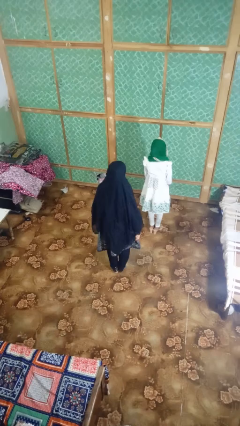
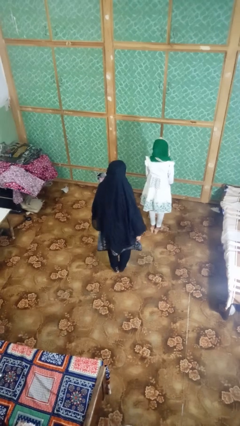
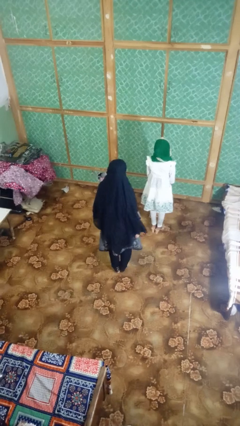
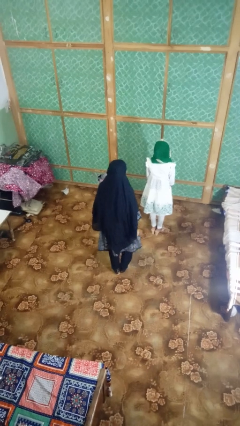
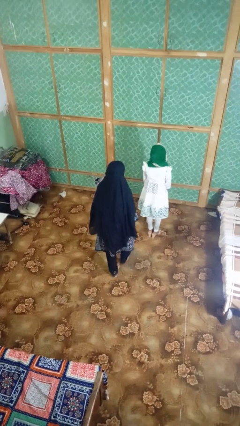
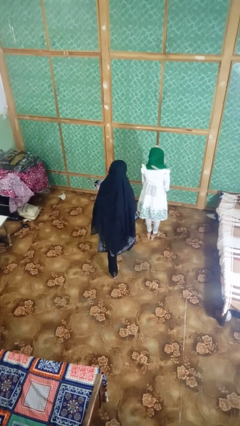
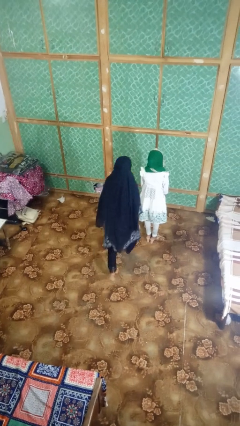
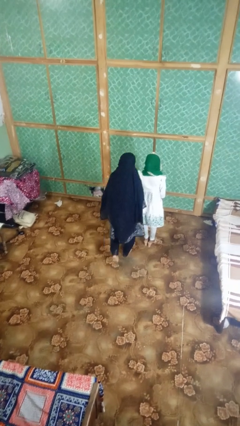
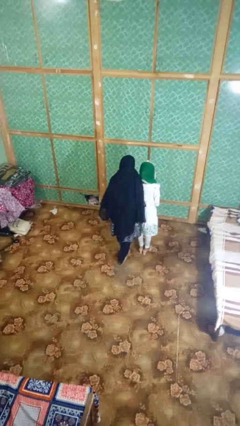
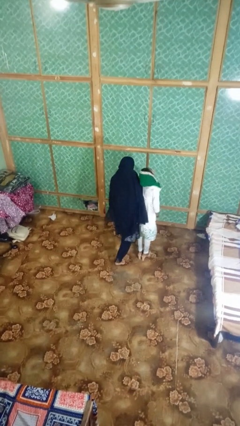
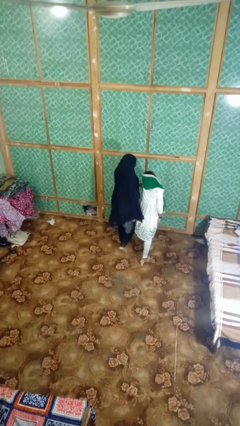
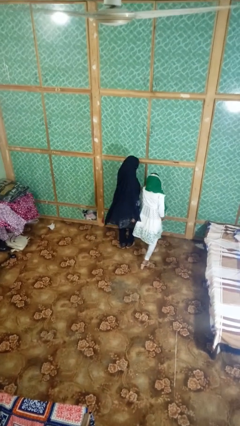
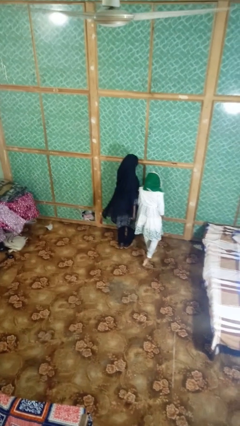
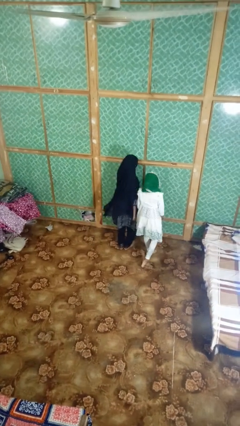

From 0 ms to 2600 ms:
person bumps into person

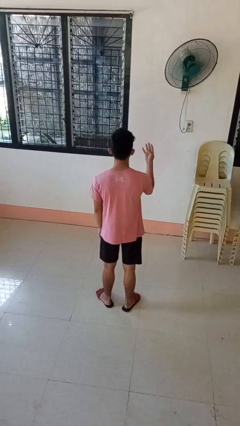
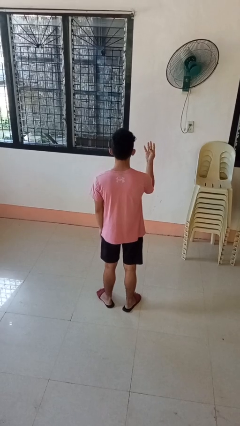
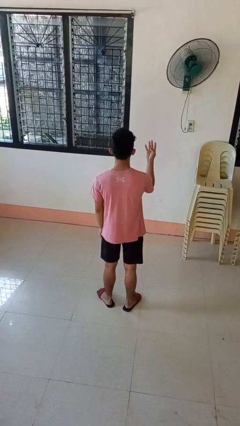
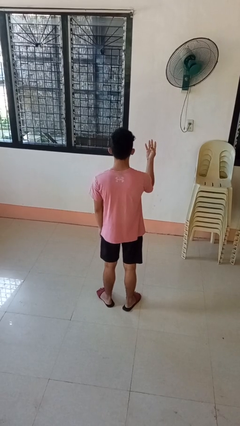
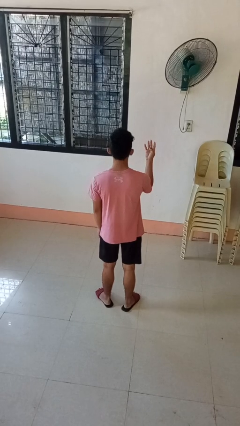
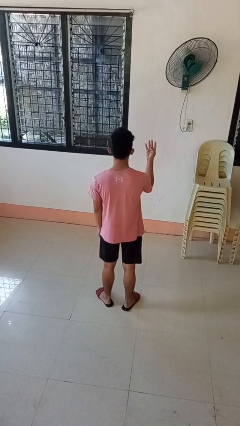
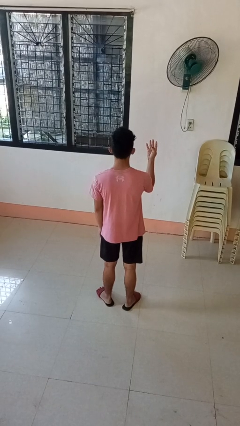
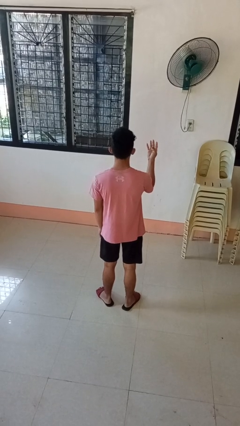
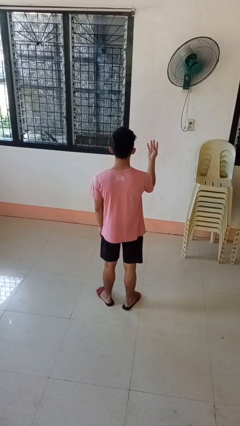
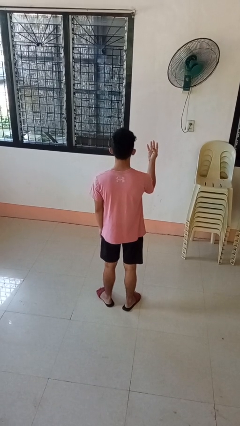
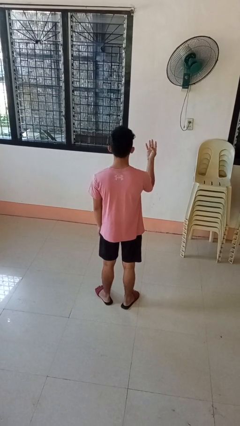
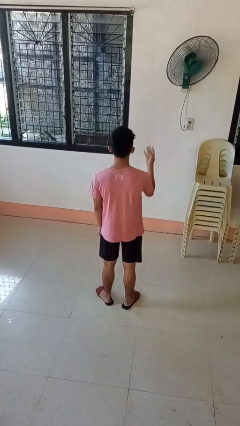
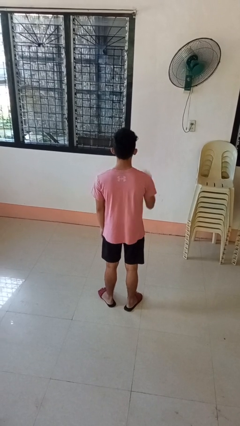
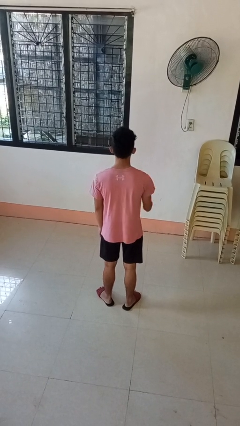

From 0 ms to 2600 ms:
person gestures number four

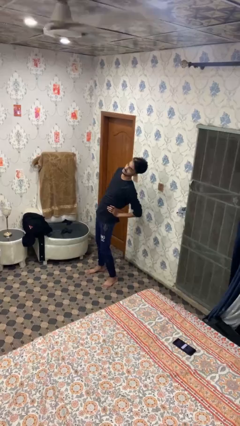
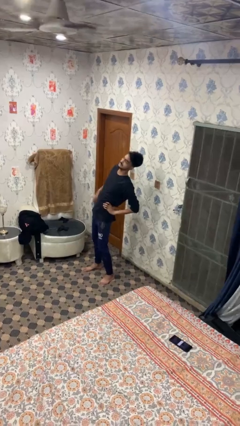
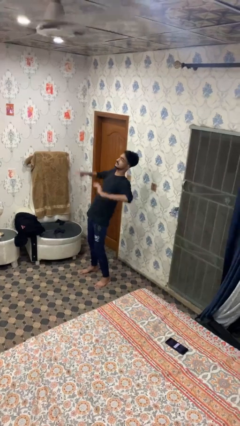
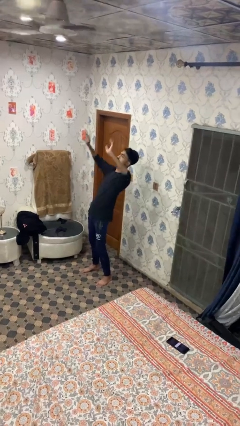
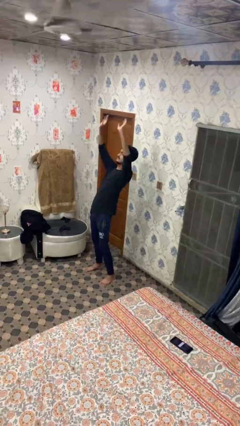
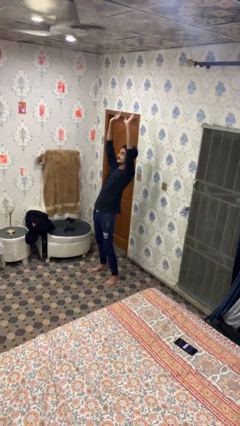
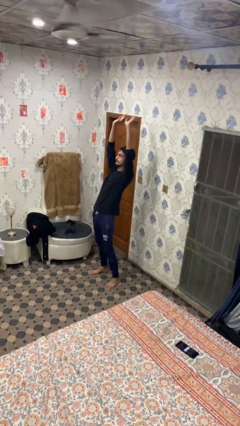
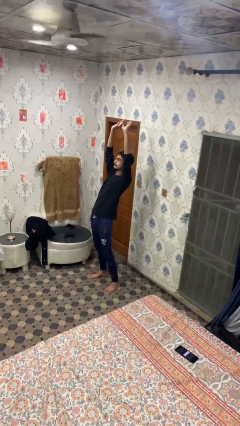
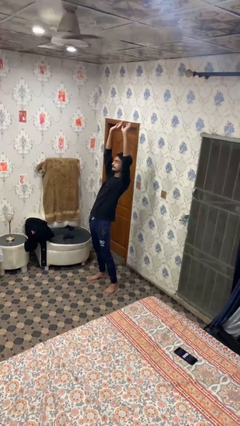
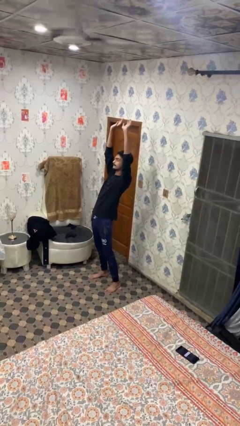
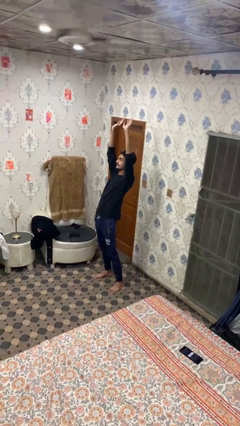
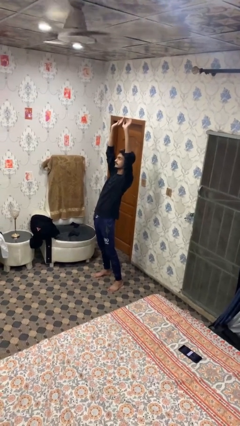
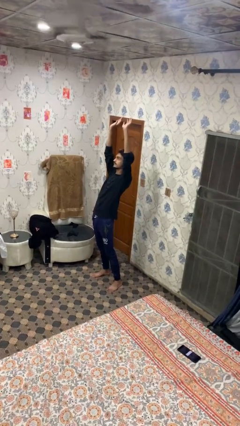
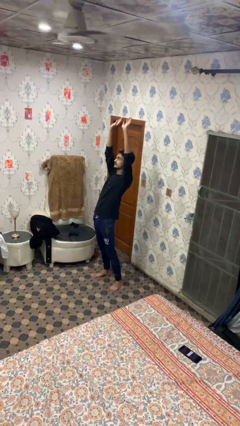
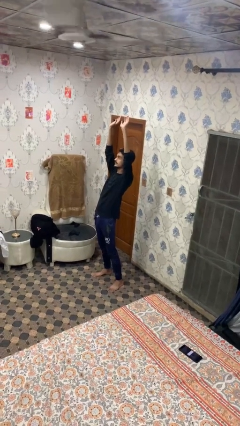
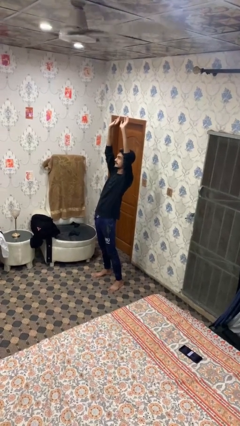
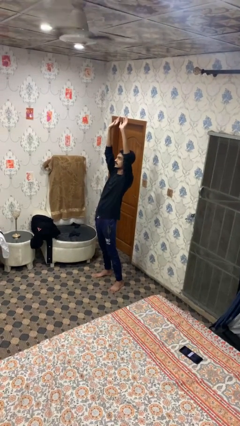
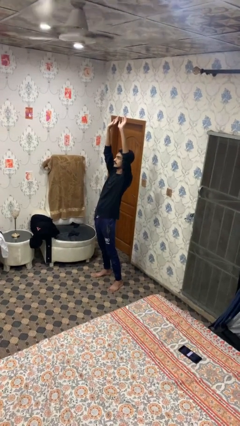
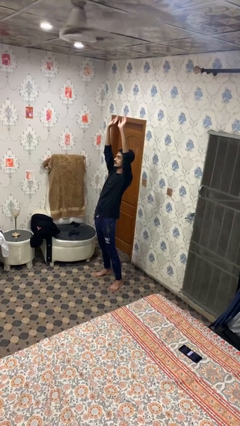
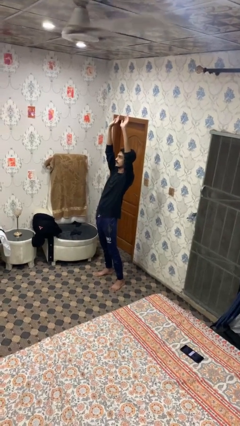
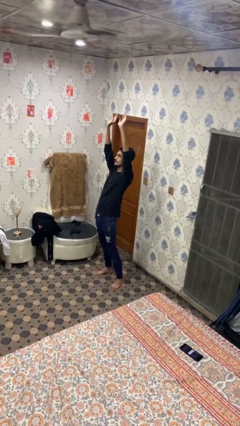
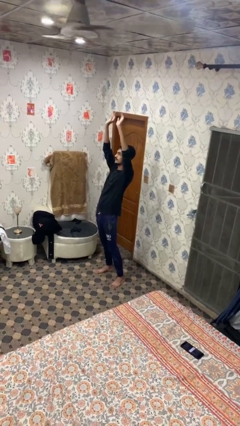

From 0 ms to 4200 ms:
person stretches arms over head

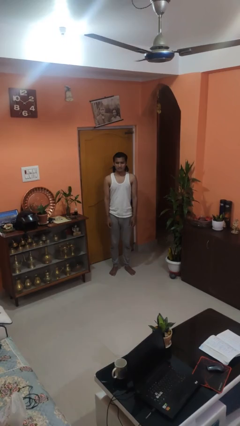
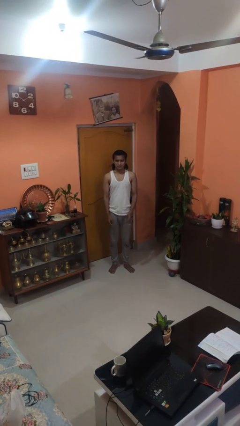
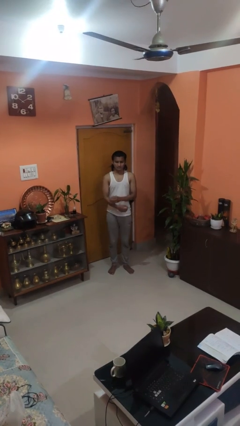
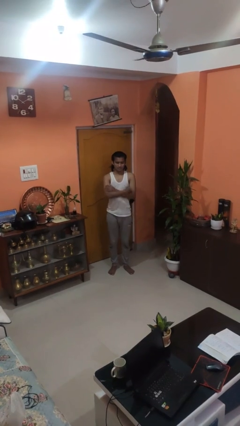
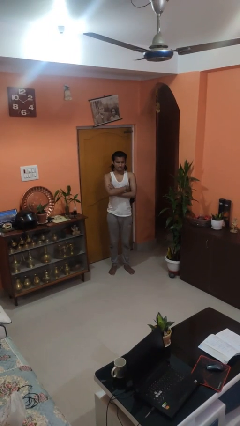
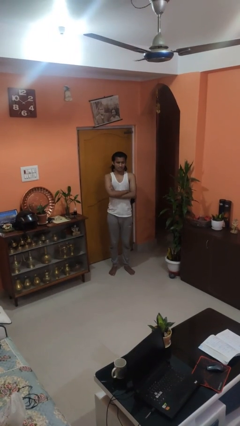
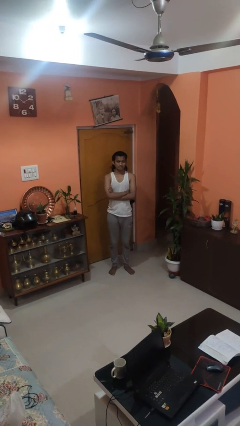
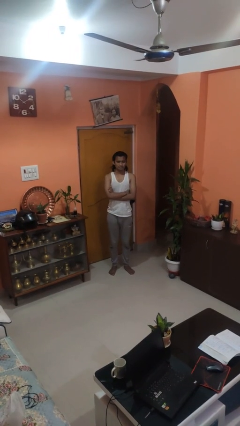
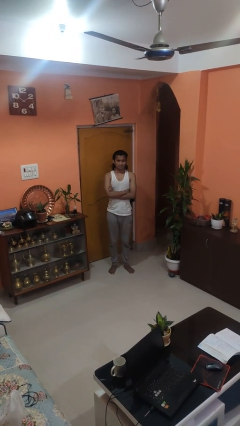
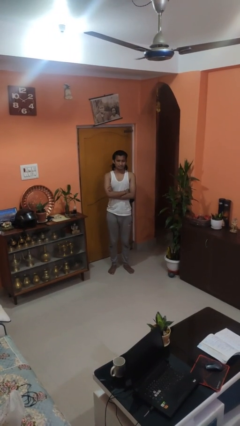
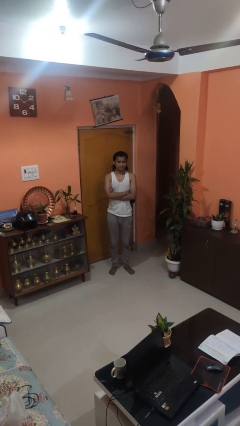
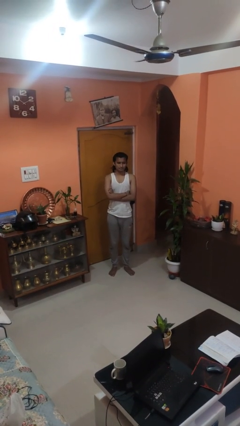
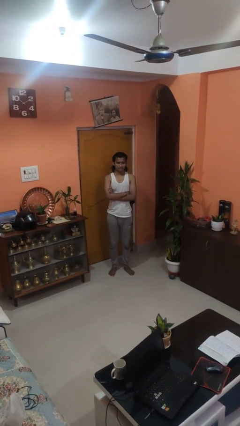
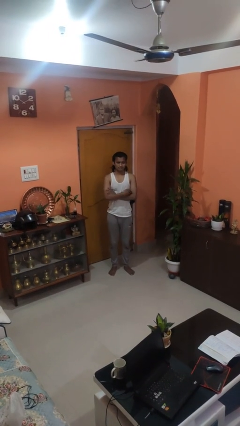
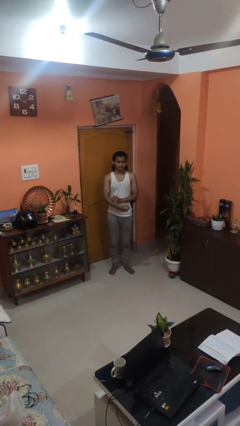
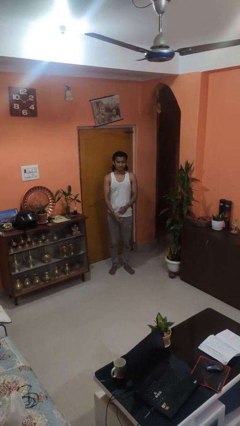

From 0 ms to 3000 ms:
person crosses arms

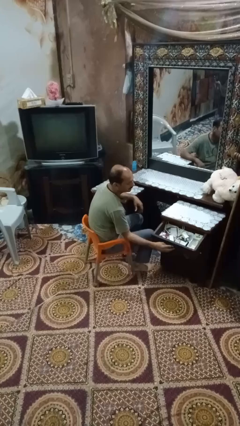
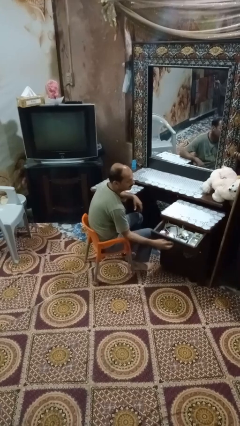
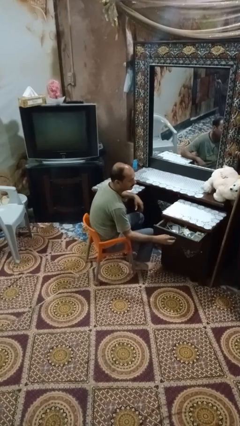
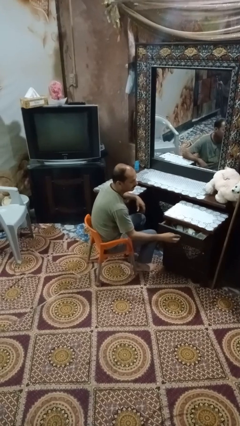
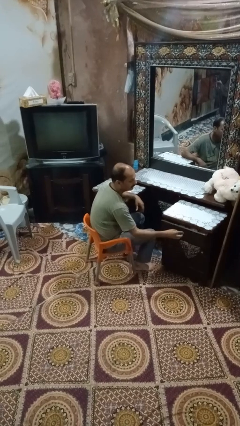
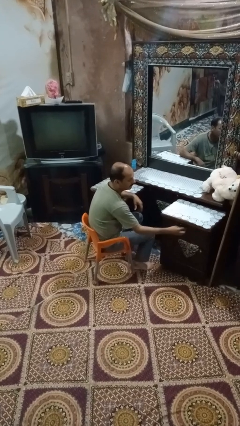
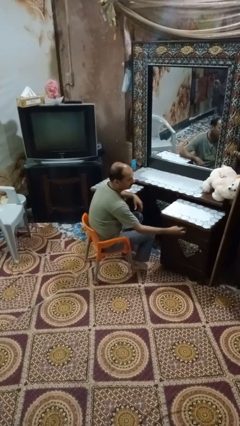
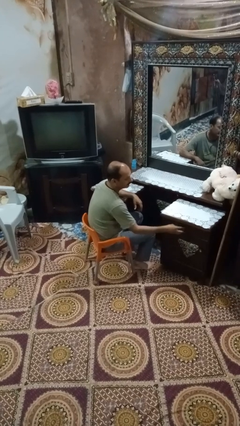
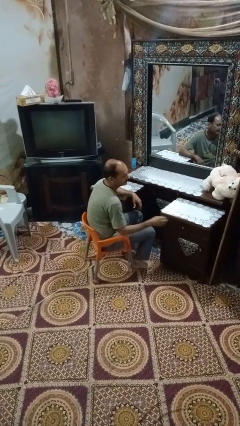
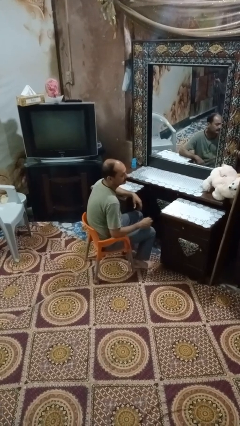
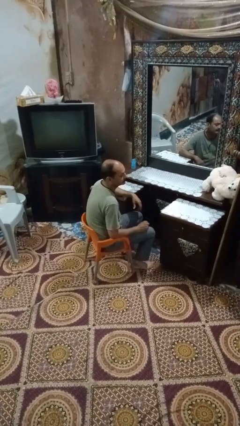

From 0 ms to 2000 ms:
person closes dresser drawer

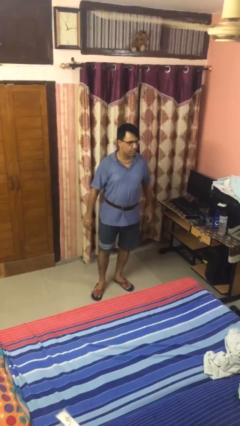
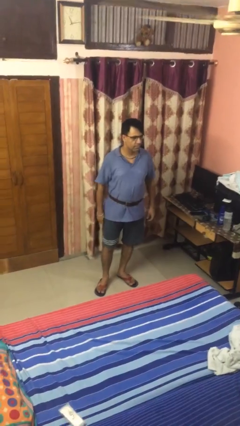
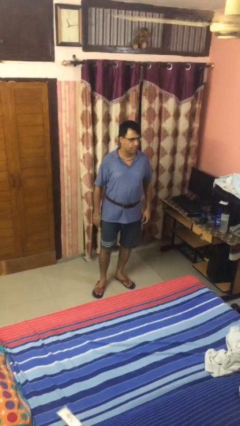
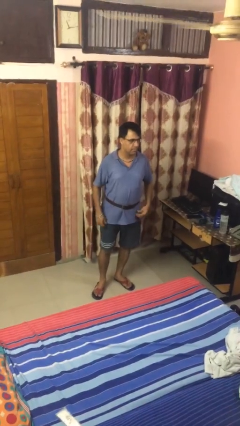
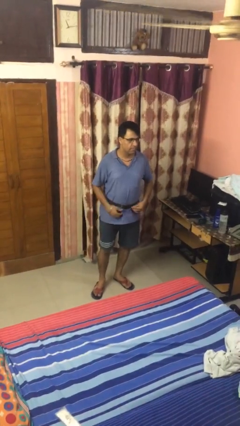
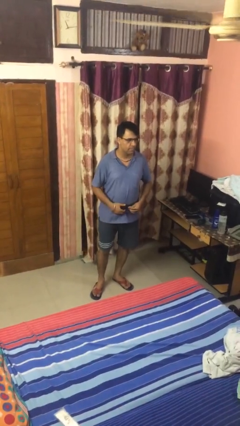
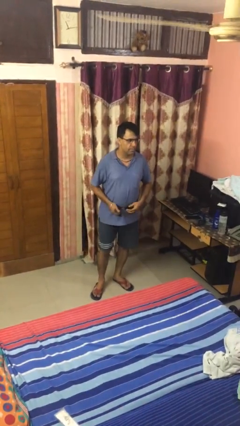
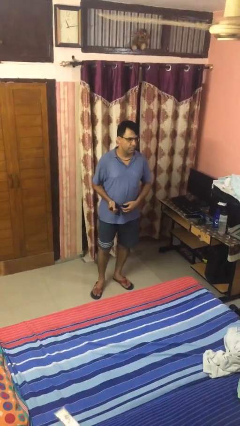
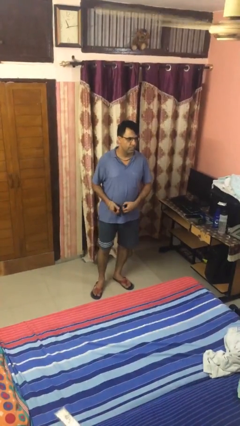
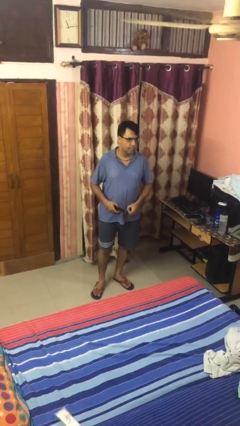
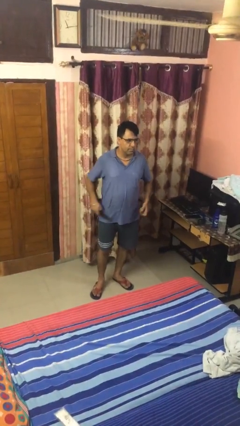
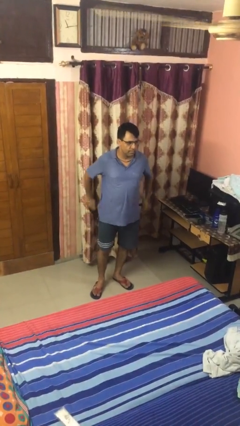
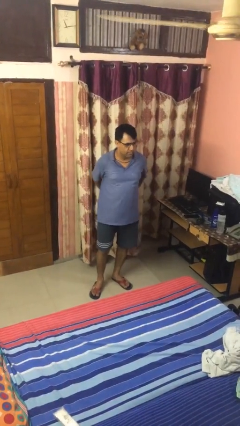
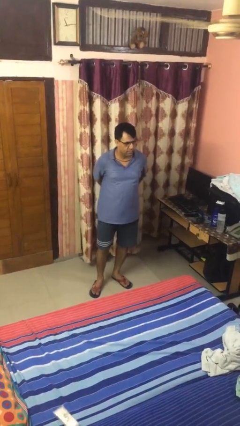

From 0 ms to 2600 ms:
person takes off belt

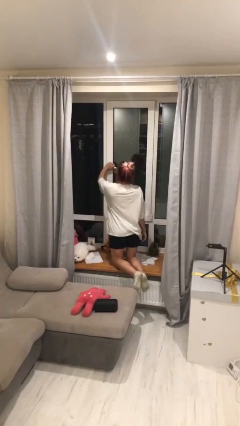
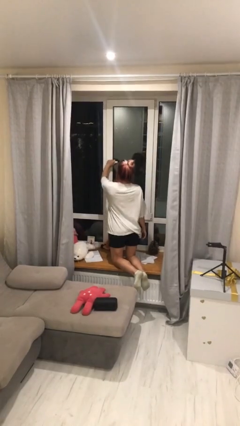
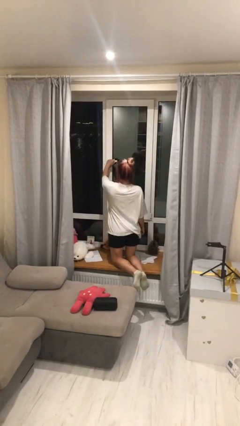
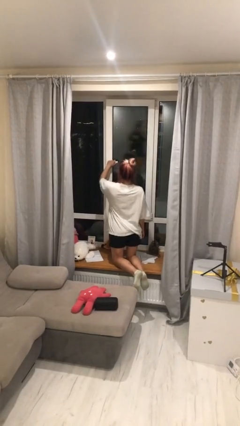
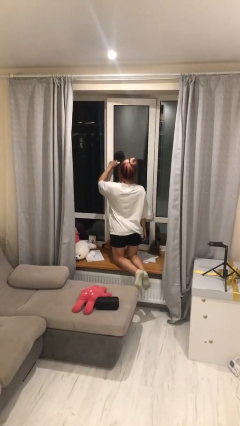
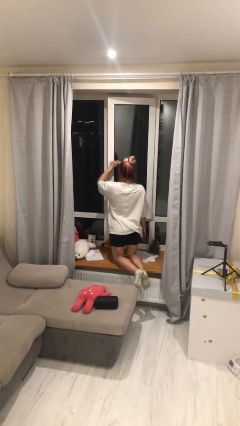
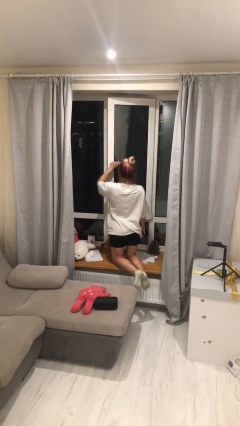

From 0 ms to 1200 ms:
person opens home window
